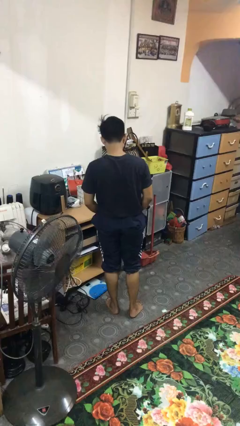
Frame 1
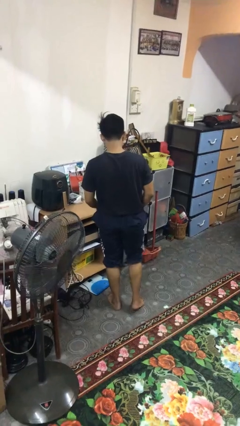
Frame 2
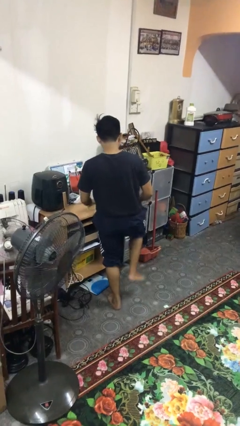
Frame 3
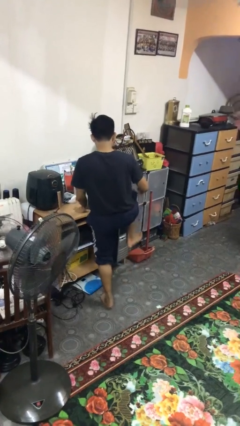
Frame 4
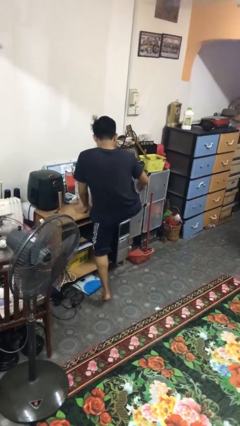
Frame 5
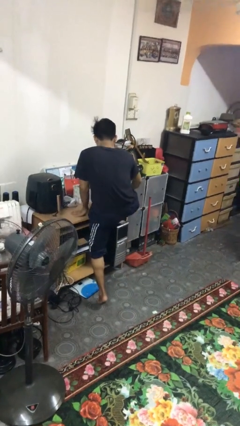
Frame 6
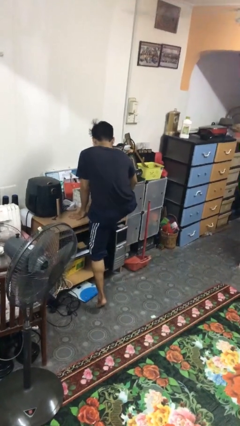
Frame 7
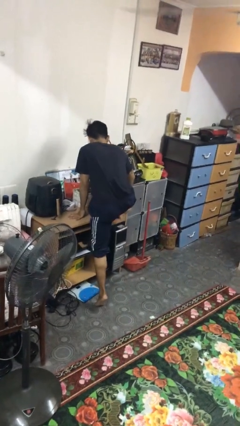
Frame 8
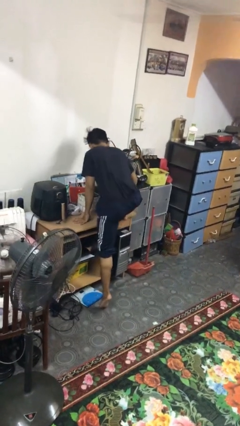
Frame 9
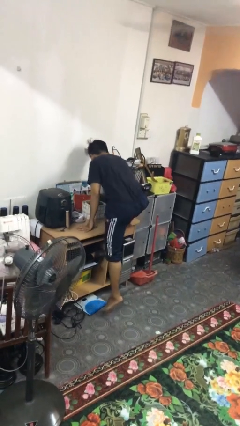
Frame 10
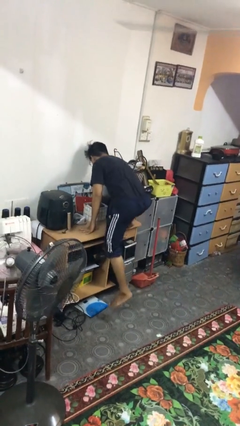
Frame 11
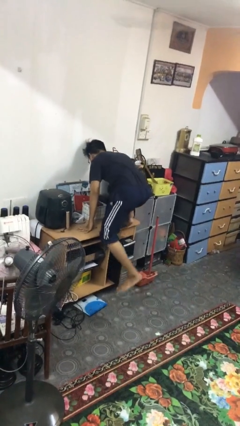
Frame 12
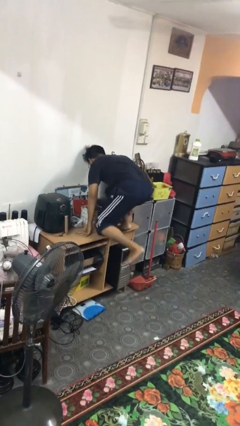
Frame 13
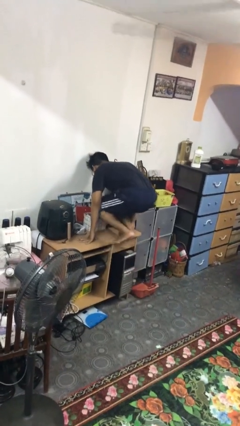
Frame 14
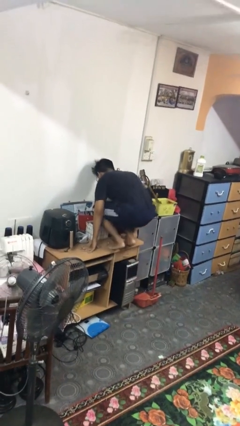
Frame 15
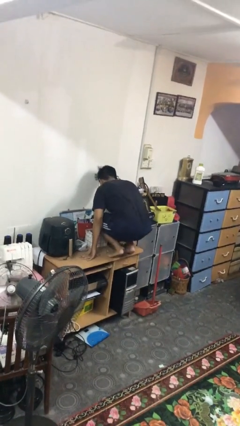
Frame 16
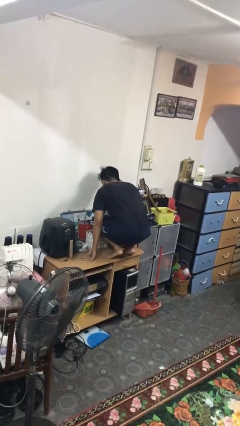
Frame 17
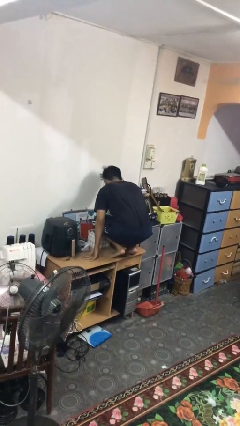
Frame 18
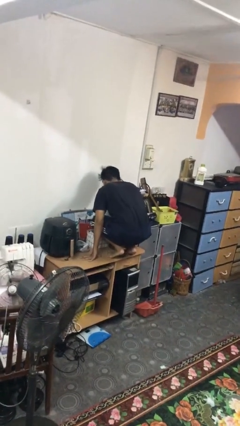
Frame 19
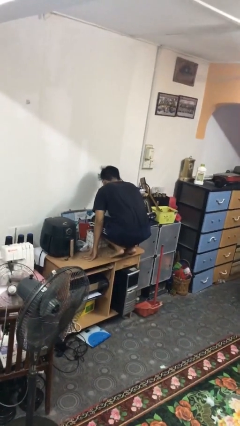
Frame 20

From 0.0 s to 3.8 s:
person climbs on table

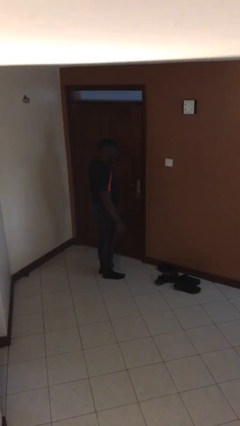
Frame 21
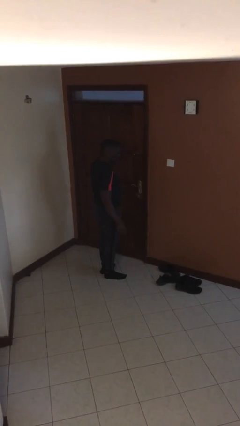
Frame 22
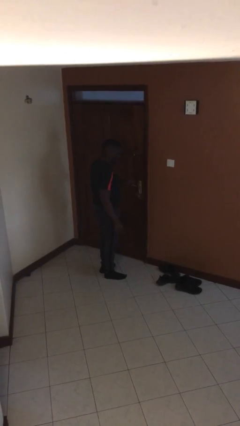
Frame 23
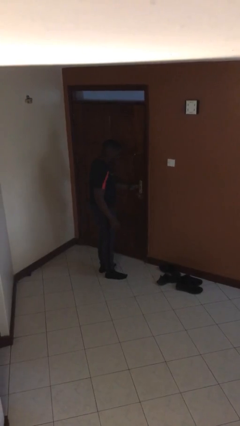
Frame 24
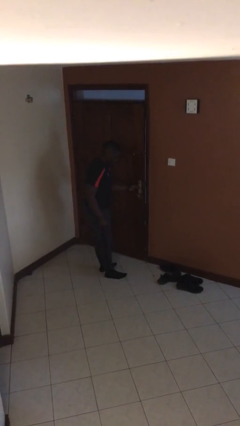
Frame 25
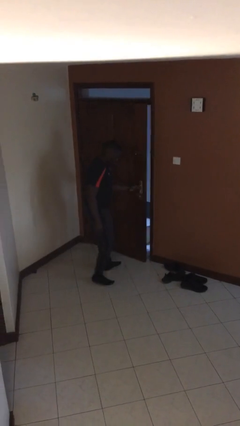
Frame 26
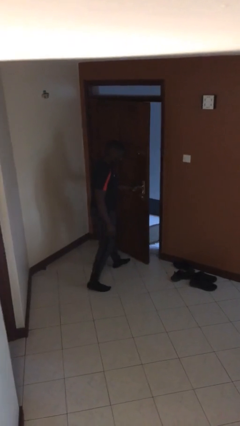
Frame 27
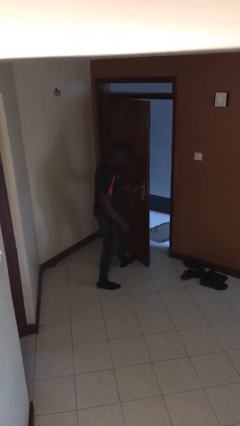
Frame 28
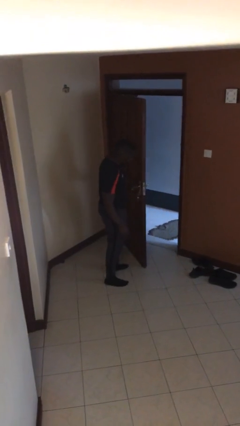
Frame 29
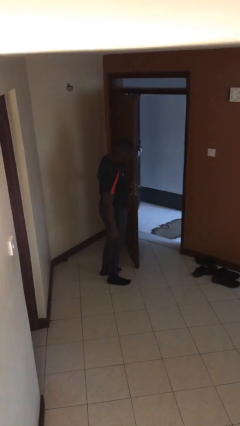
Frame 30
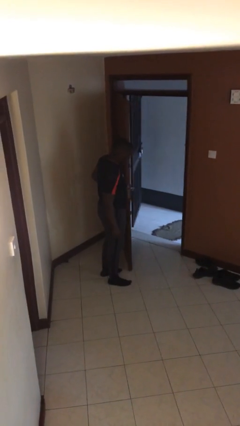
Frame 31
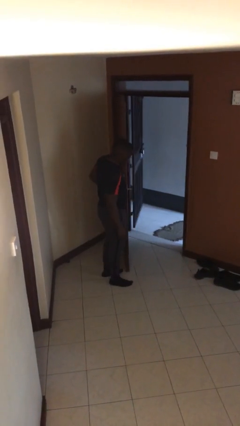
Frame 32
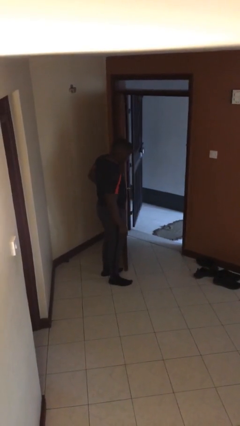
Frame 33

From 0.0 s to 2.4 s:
person opens facility door

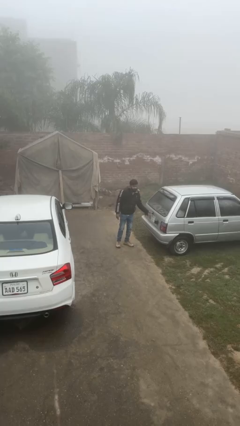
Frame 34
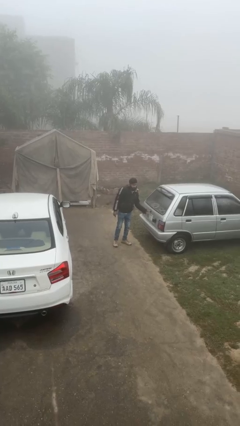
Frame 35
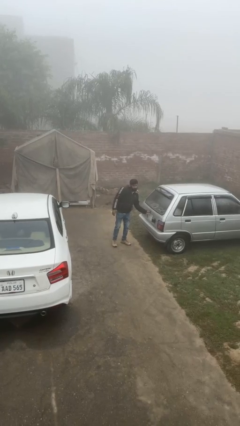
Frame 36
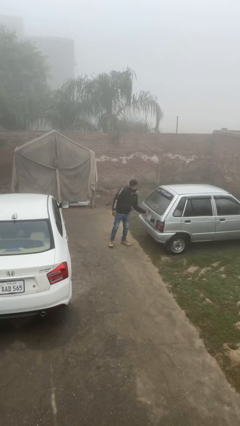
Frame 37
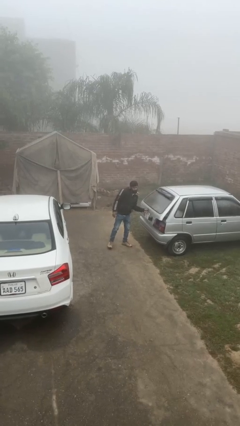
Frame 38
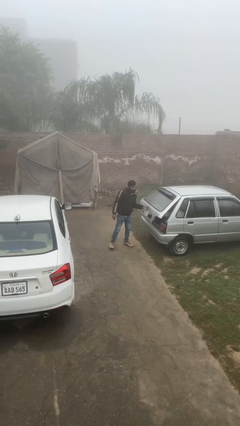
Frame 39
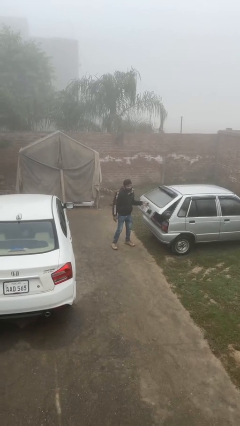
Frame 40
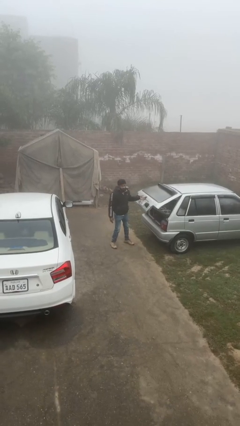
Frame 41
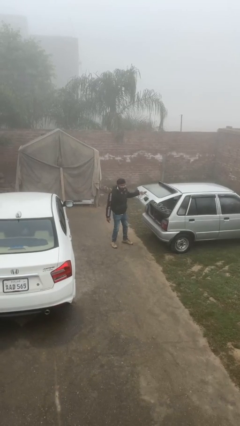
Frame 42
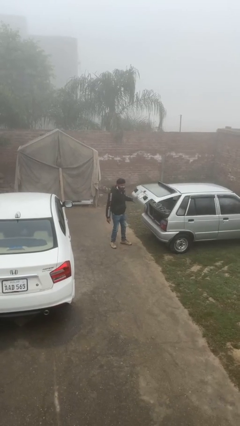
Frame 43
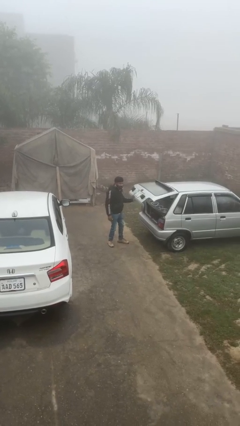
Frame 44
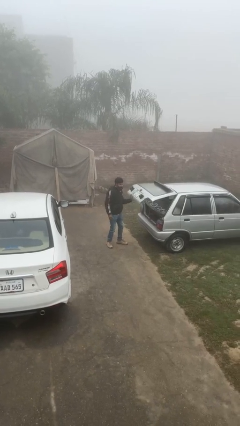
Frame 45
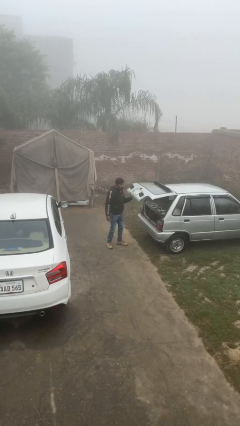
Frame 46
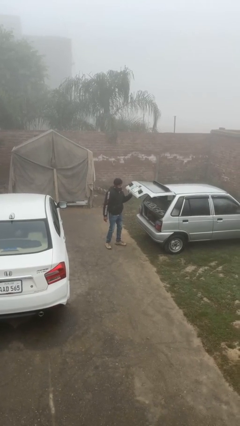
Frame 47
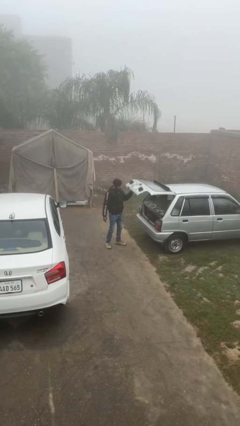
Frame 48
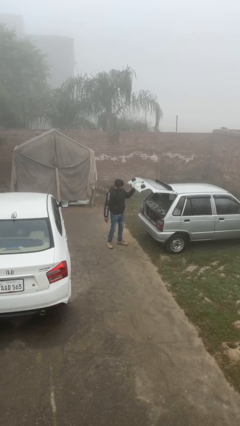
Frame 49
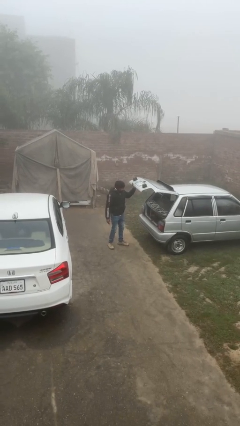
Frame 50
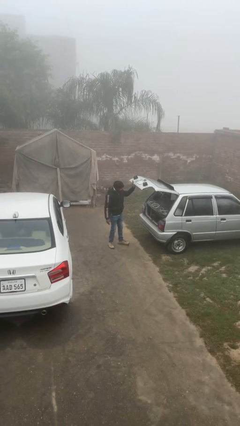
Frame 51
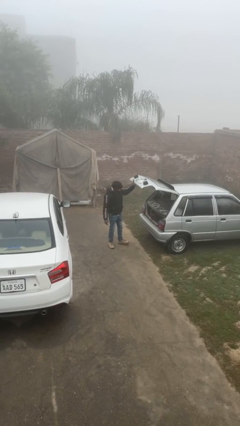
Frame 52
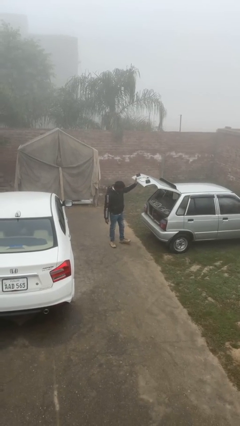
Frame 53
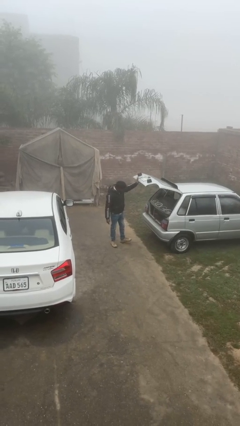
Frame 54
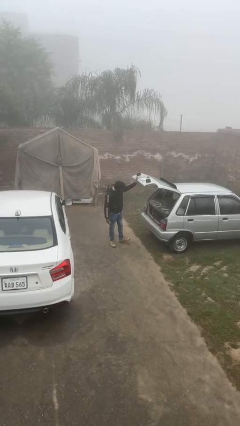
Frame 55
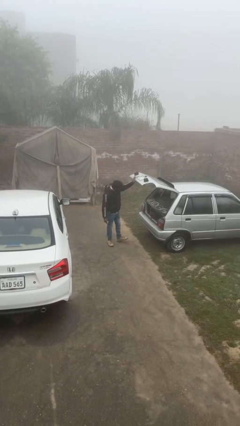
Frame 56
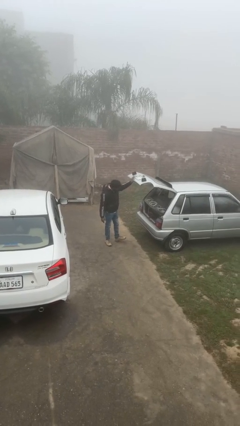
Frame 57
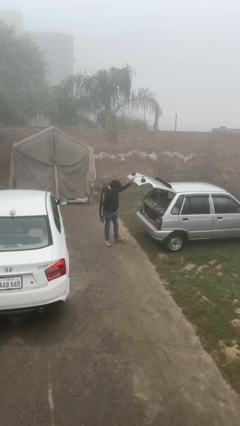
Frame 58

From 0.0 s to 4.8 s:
person opens car trunk

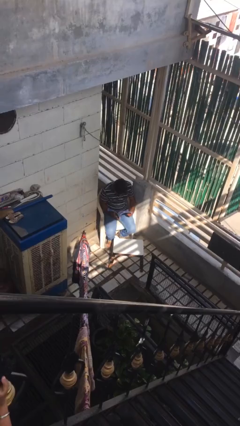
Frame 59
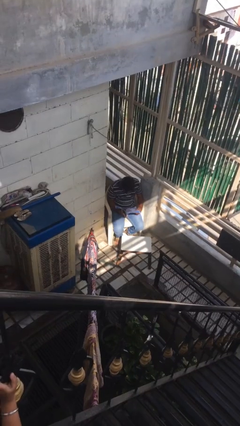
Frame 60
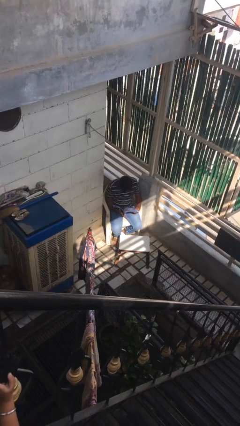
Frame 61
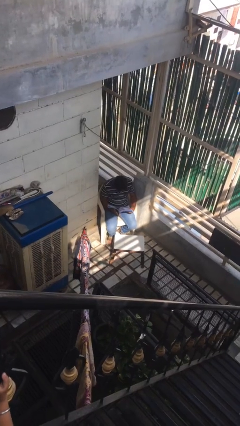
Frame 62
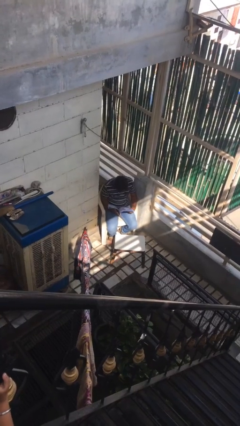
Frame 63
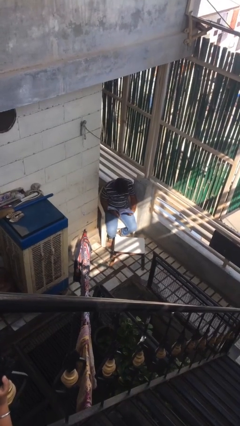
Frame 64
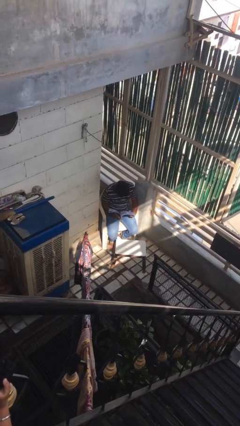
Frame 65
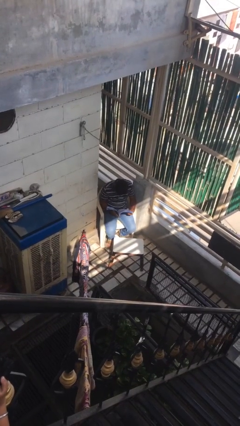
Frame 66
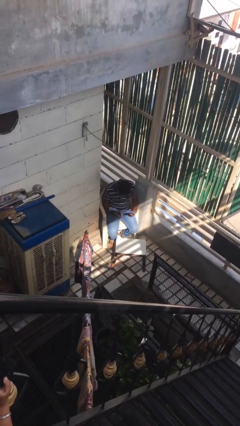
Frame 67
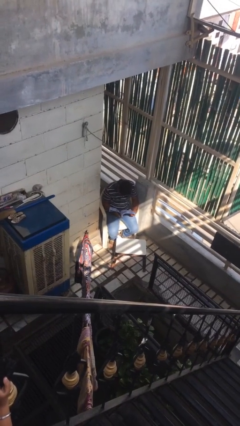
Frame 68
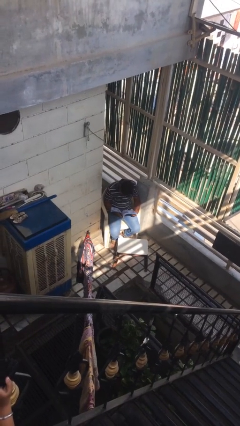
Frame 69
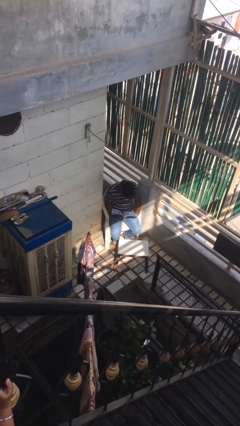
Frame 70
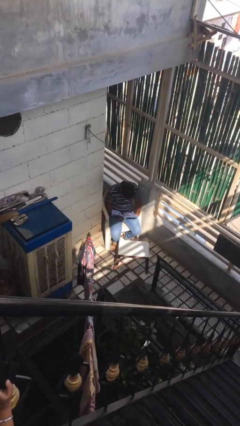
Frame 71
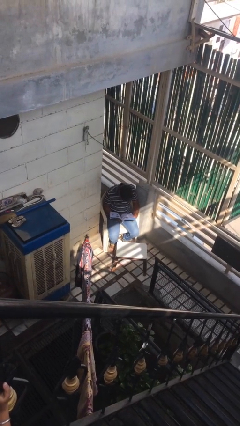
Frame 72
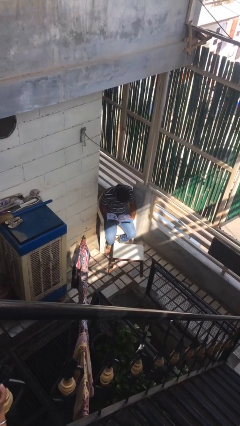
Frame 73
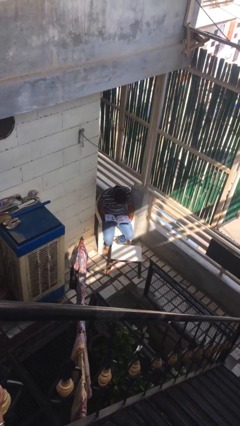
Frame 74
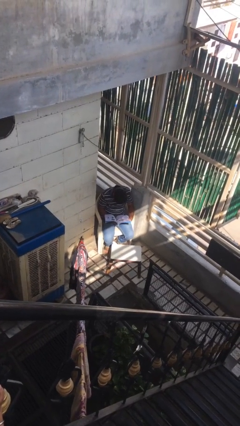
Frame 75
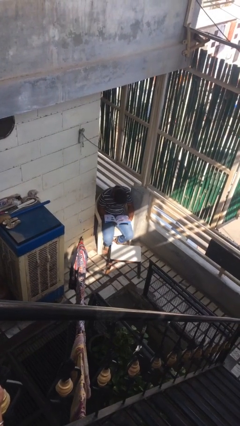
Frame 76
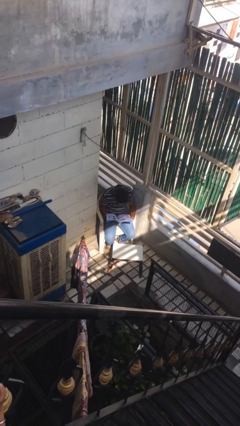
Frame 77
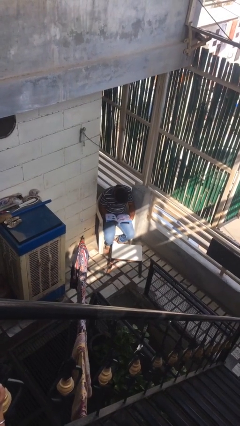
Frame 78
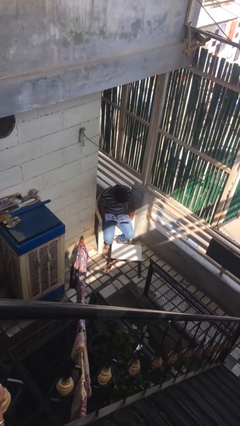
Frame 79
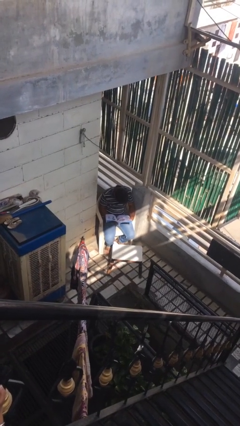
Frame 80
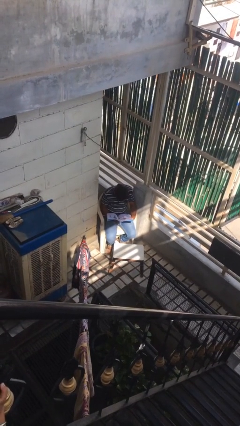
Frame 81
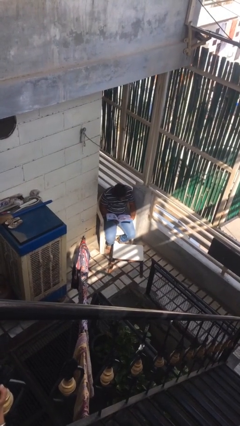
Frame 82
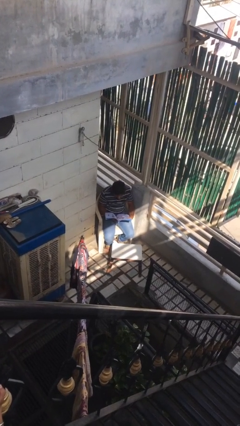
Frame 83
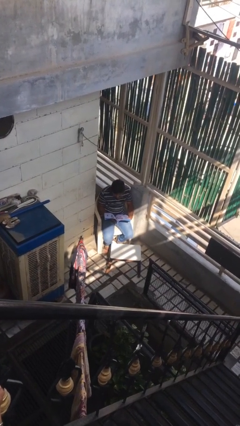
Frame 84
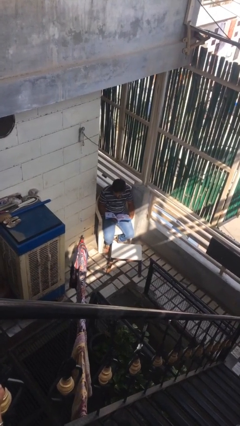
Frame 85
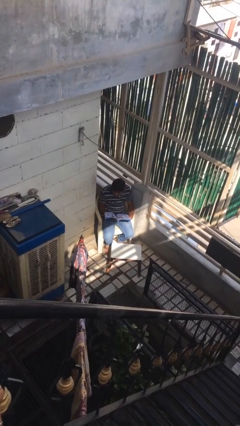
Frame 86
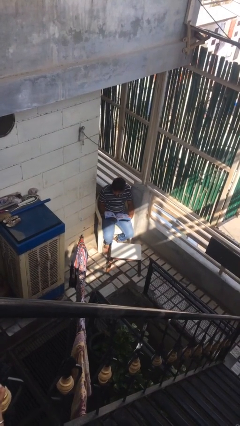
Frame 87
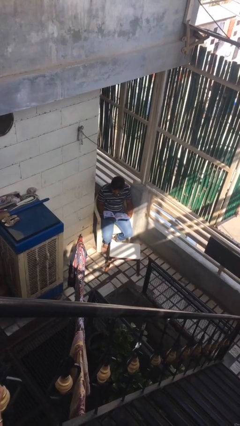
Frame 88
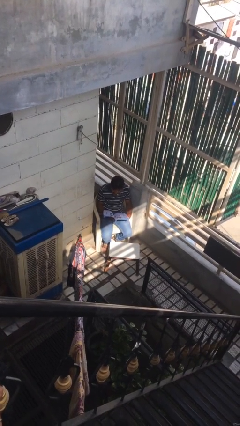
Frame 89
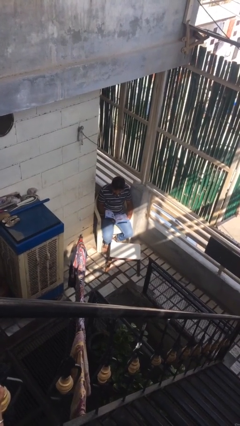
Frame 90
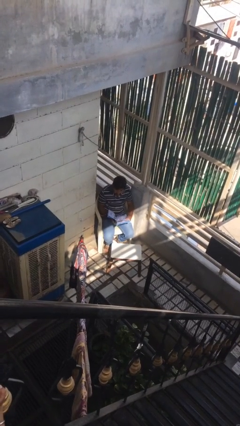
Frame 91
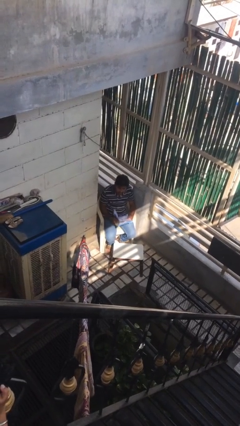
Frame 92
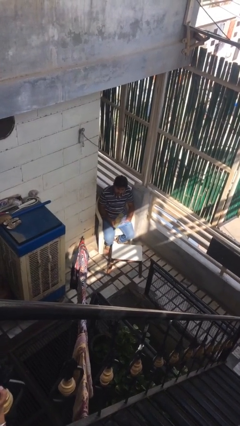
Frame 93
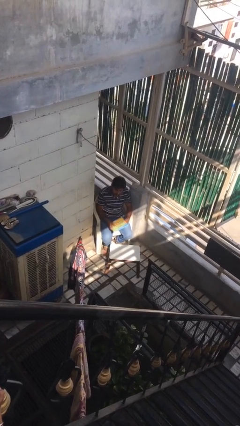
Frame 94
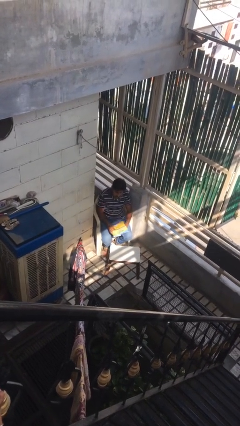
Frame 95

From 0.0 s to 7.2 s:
person reads document
